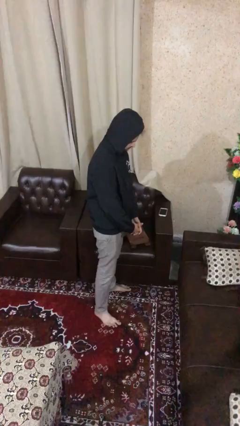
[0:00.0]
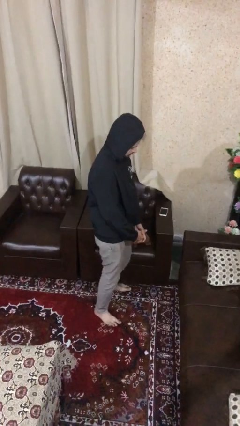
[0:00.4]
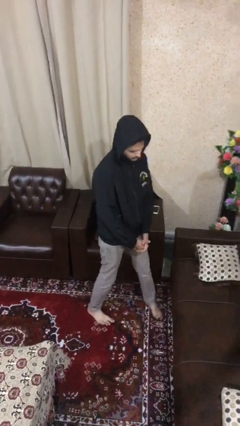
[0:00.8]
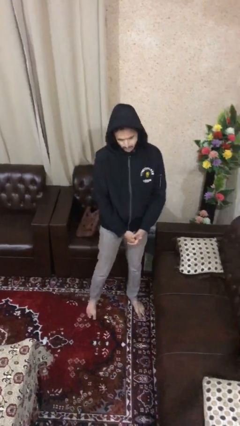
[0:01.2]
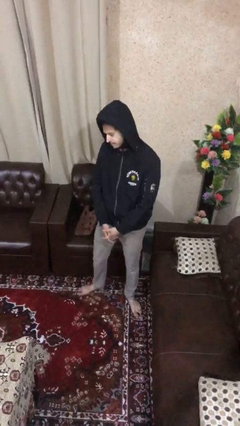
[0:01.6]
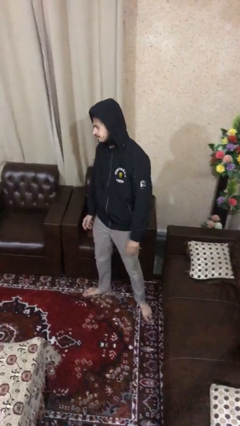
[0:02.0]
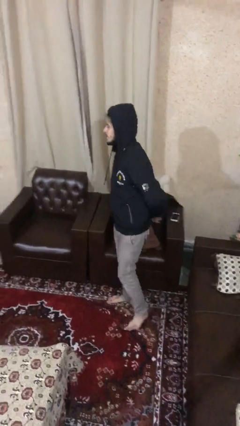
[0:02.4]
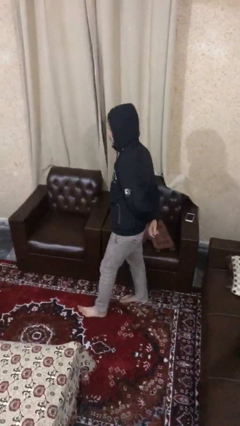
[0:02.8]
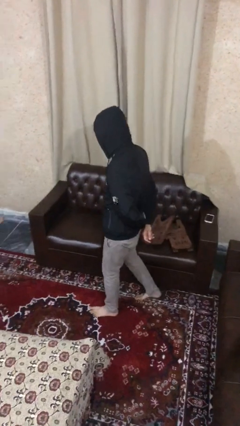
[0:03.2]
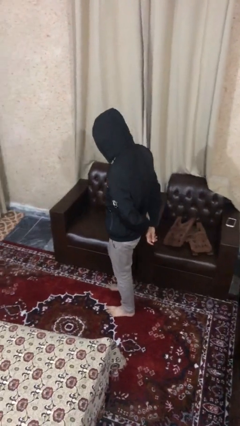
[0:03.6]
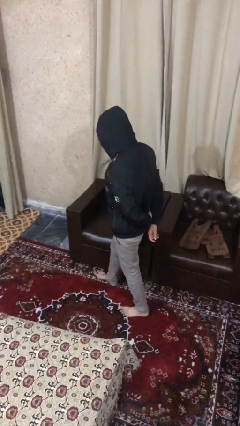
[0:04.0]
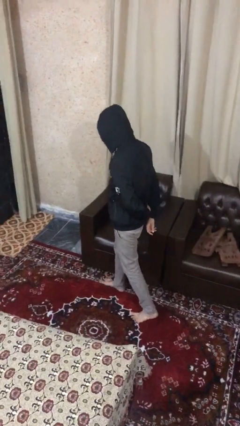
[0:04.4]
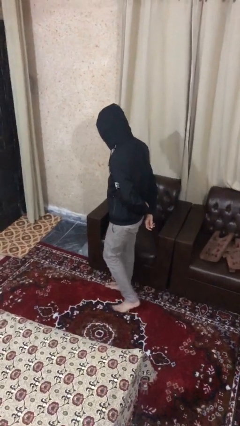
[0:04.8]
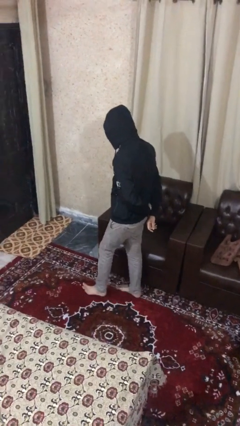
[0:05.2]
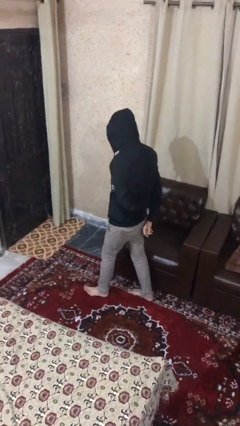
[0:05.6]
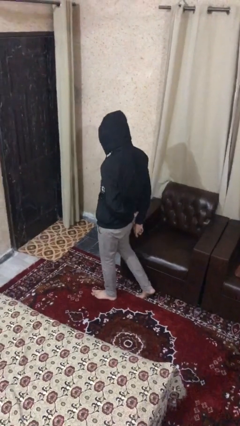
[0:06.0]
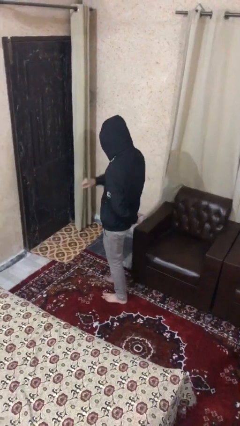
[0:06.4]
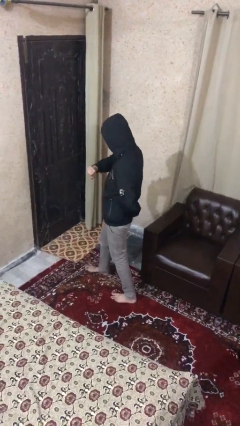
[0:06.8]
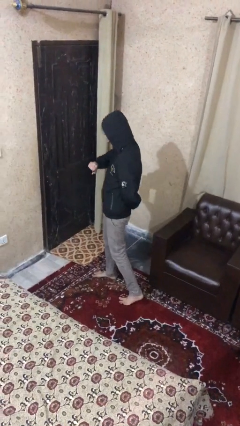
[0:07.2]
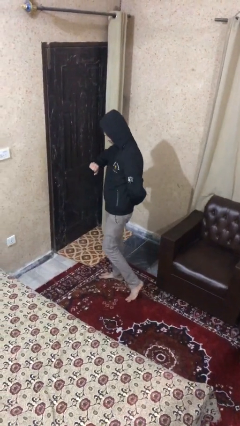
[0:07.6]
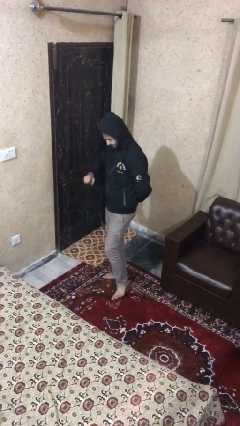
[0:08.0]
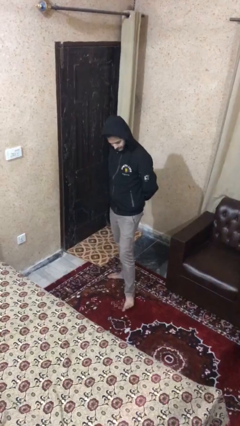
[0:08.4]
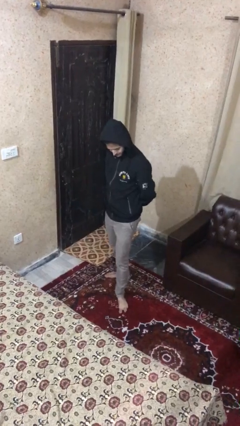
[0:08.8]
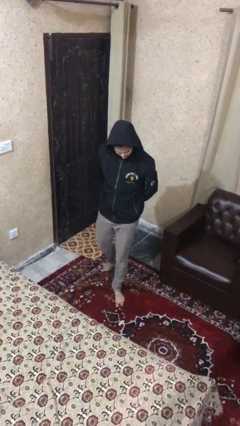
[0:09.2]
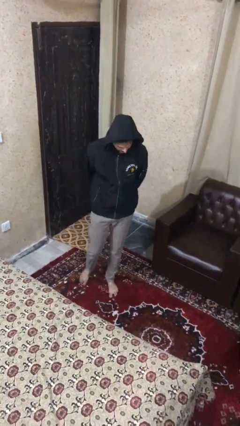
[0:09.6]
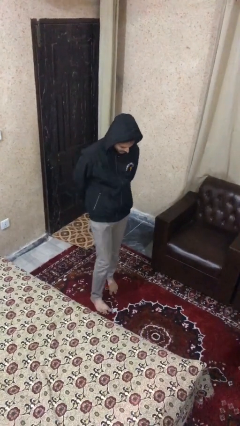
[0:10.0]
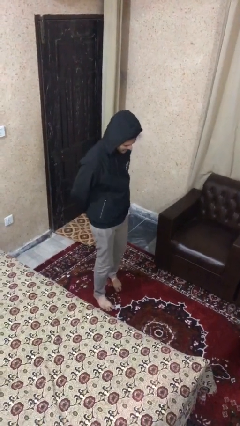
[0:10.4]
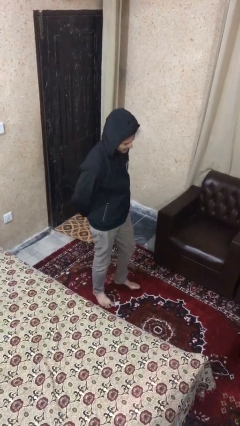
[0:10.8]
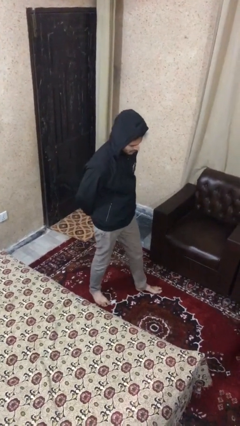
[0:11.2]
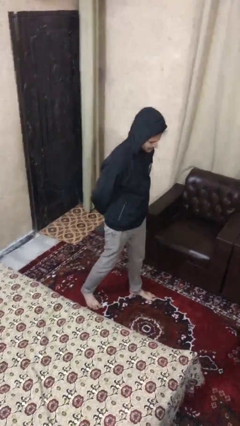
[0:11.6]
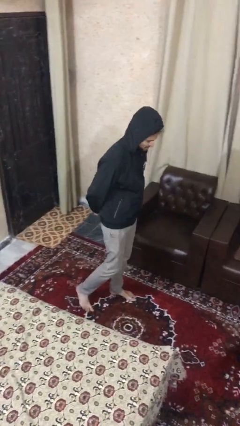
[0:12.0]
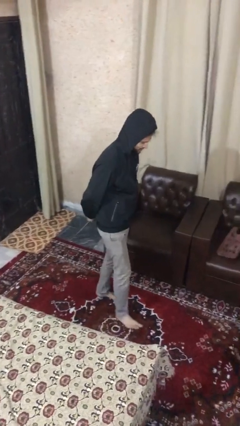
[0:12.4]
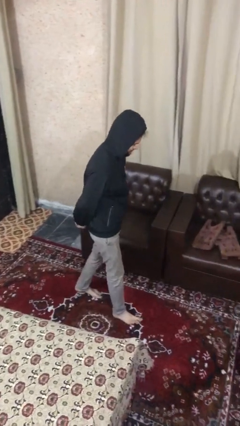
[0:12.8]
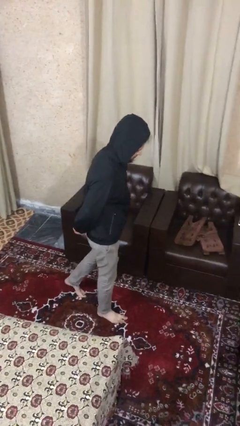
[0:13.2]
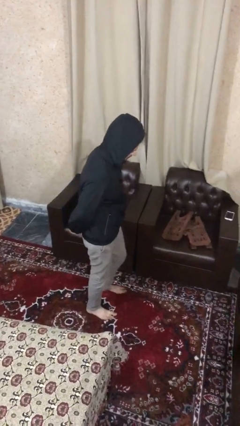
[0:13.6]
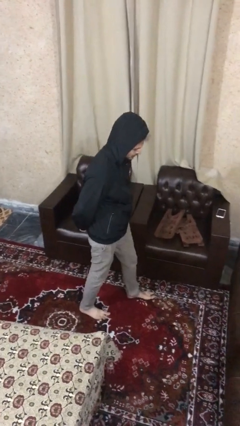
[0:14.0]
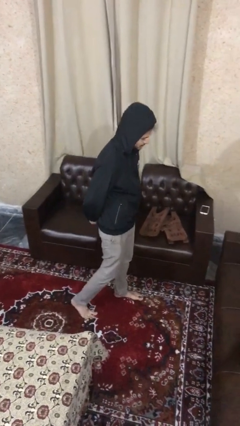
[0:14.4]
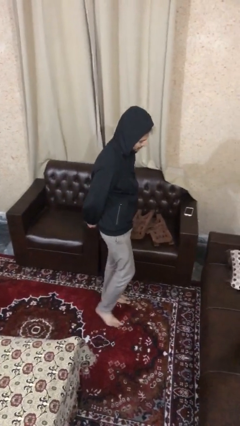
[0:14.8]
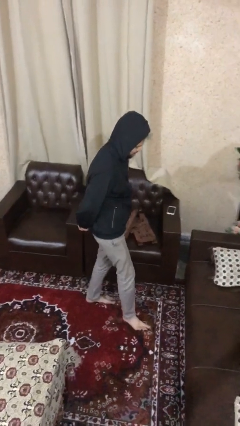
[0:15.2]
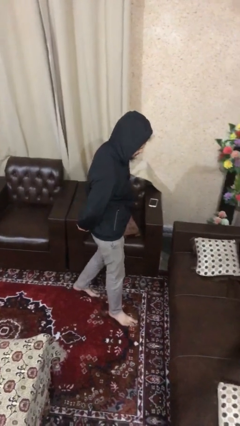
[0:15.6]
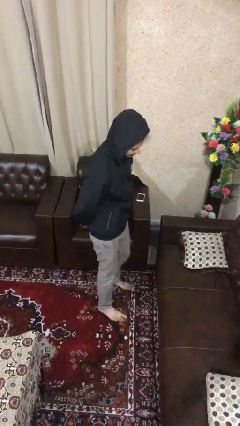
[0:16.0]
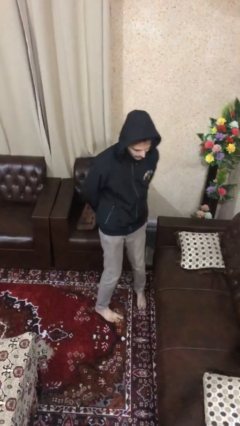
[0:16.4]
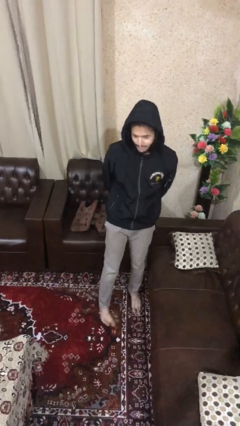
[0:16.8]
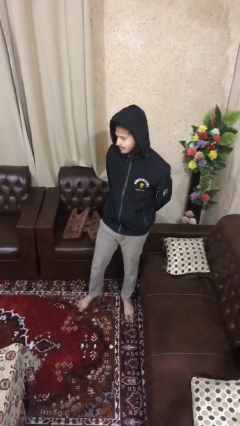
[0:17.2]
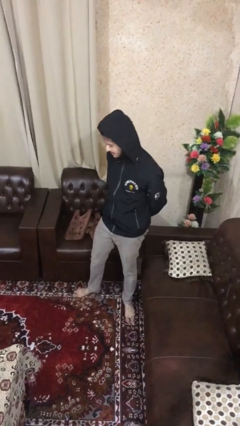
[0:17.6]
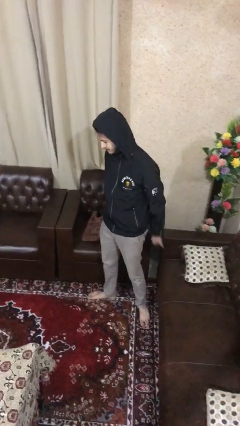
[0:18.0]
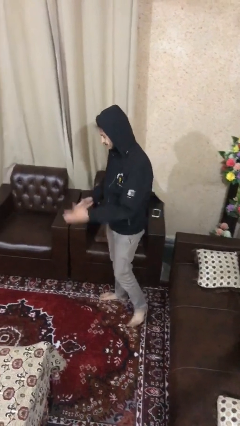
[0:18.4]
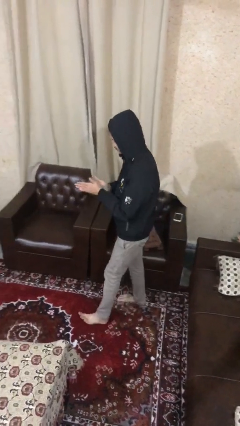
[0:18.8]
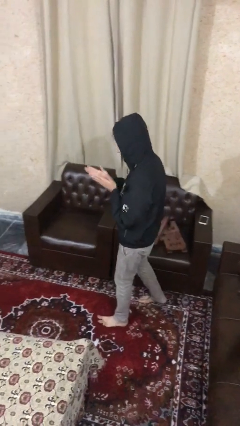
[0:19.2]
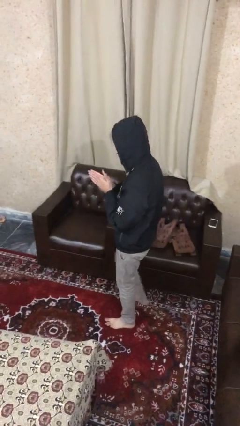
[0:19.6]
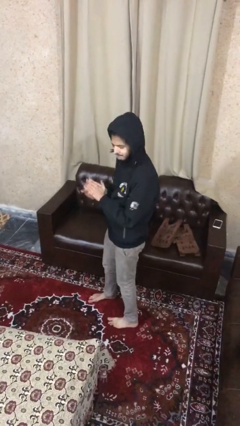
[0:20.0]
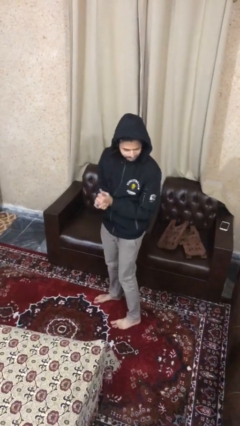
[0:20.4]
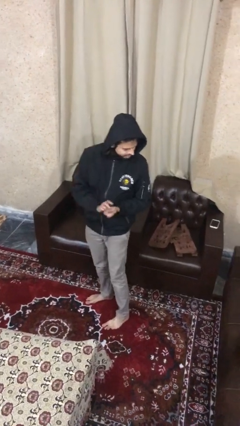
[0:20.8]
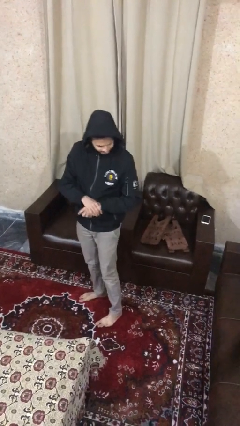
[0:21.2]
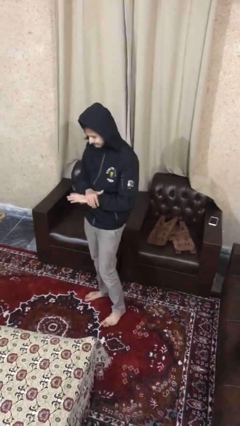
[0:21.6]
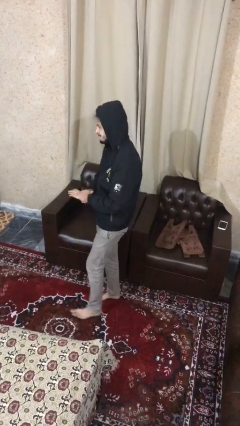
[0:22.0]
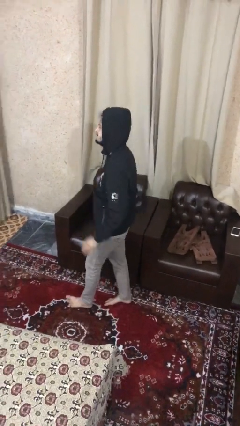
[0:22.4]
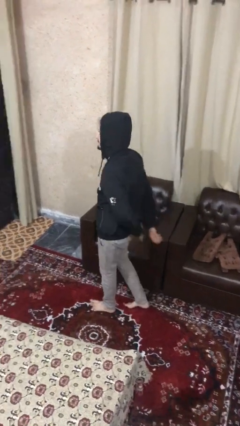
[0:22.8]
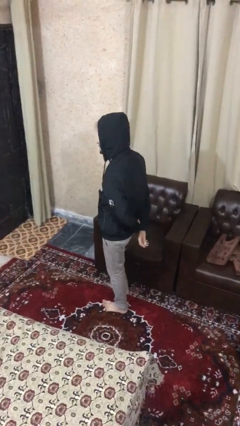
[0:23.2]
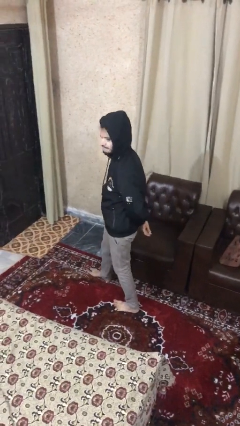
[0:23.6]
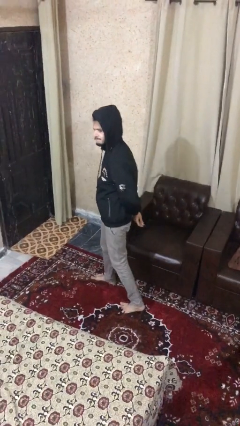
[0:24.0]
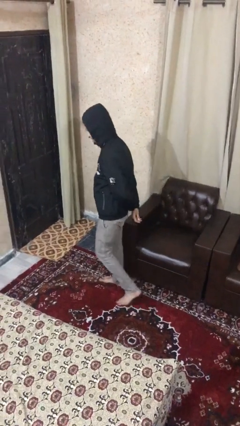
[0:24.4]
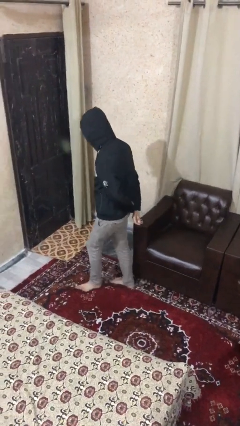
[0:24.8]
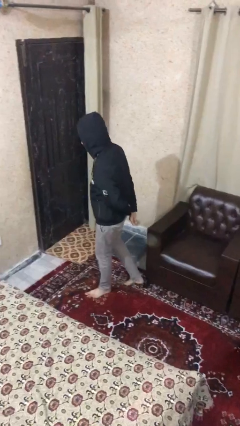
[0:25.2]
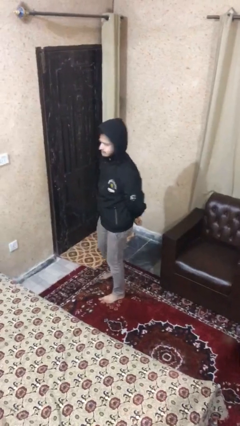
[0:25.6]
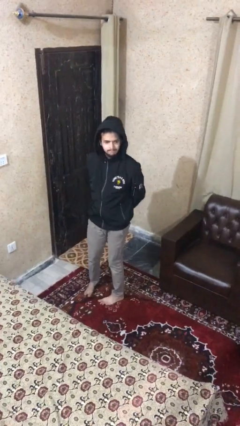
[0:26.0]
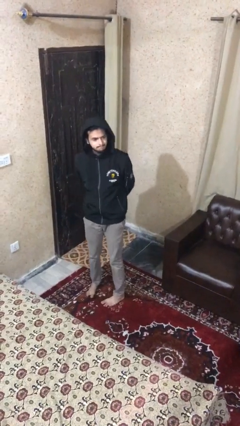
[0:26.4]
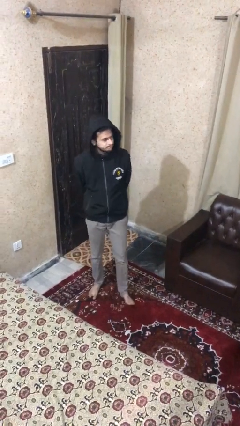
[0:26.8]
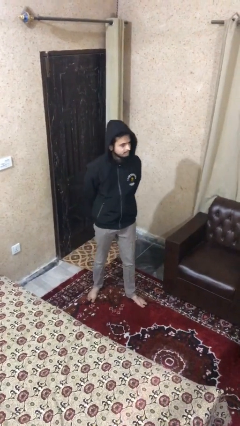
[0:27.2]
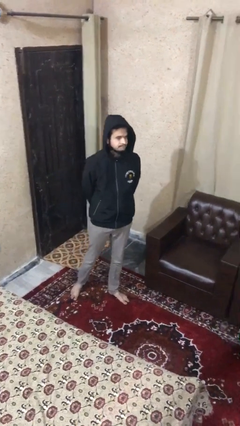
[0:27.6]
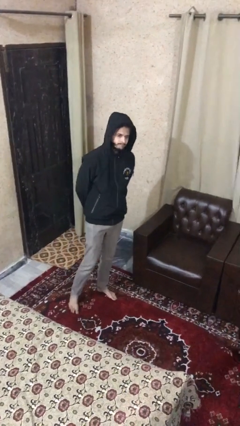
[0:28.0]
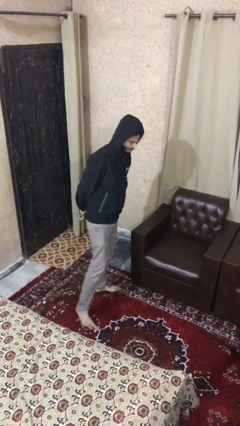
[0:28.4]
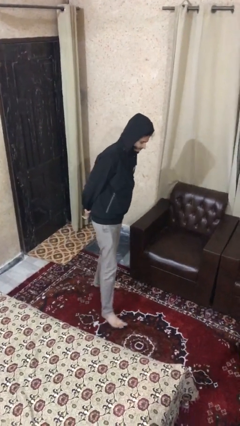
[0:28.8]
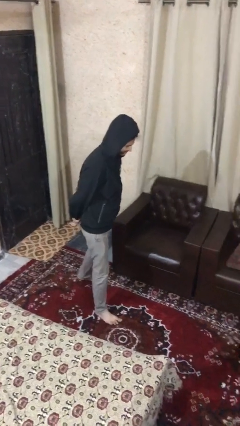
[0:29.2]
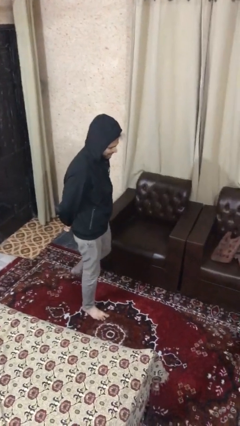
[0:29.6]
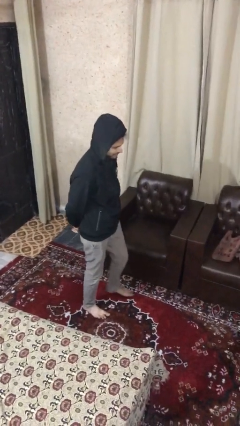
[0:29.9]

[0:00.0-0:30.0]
person walks

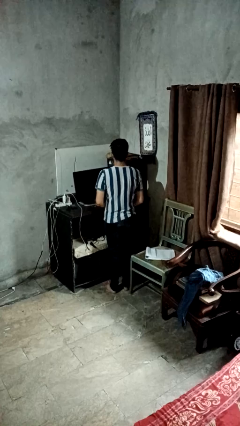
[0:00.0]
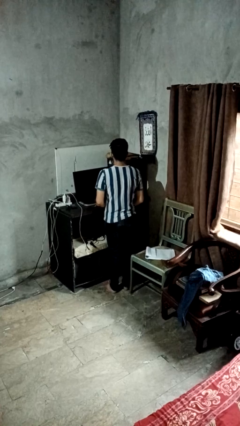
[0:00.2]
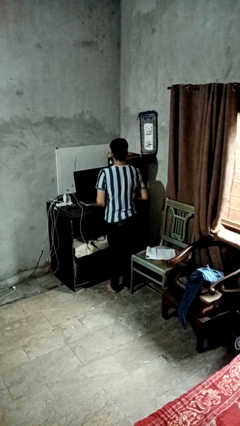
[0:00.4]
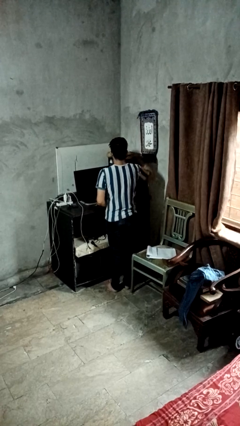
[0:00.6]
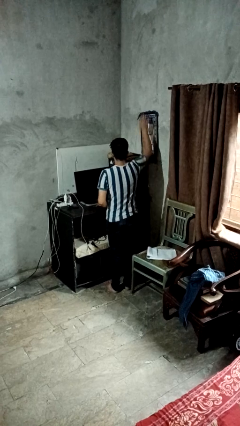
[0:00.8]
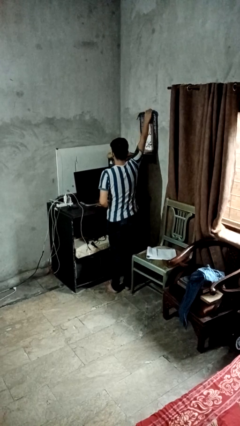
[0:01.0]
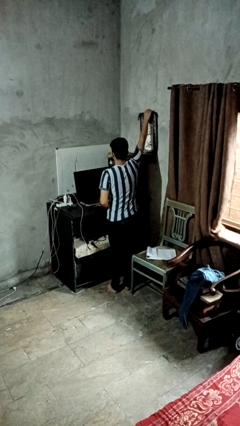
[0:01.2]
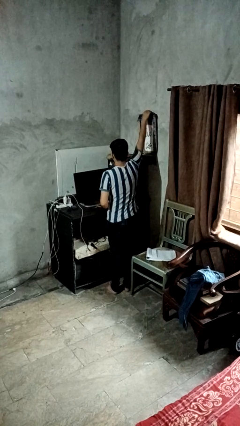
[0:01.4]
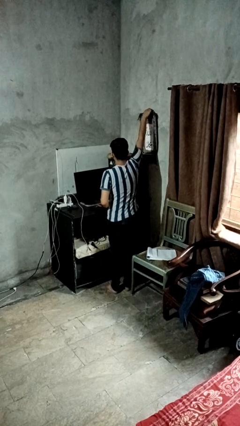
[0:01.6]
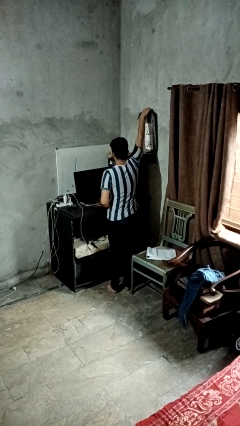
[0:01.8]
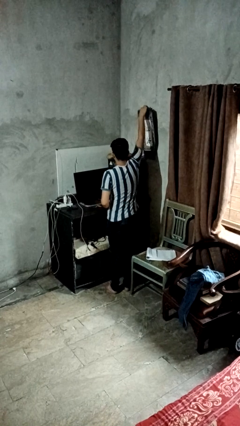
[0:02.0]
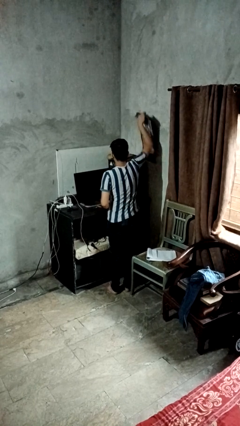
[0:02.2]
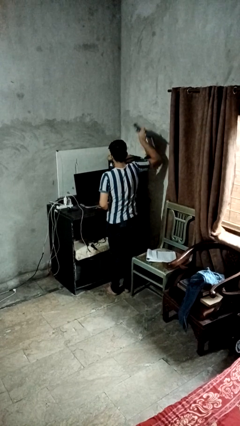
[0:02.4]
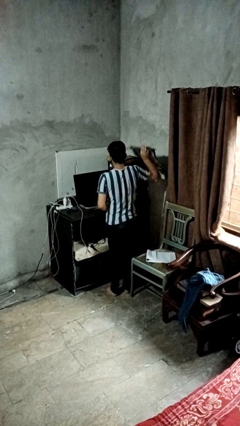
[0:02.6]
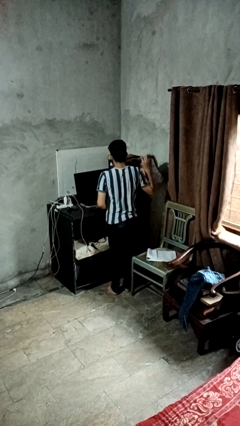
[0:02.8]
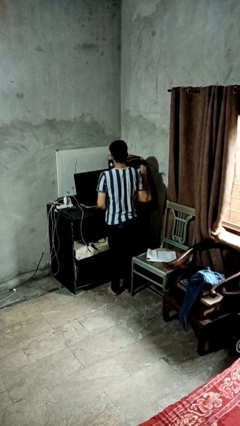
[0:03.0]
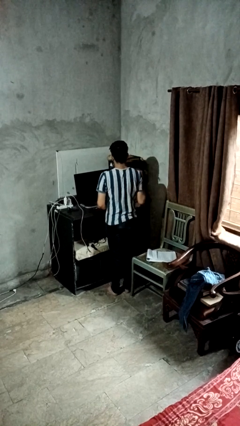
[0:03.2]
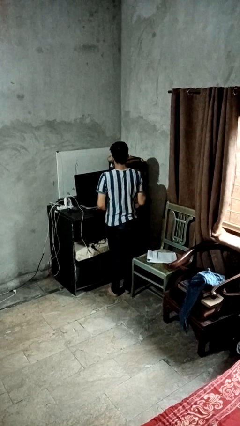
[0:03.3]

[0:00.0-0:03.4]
person takes down picture frame
